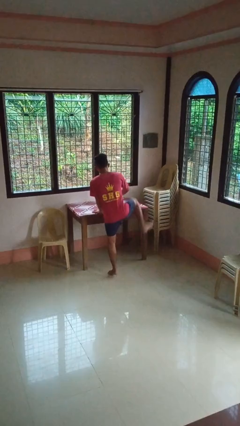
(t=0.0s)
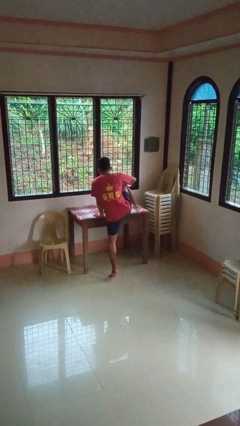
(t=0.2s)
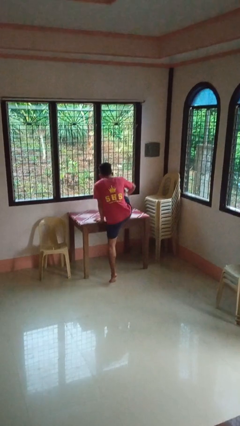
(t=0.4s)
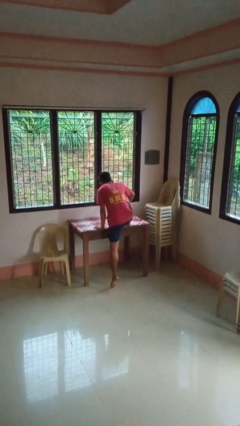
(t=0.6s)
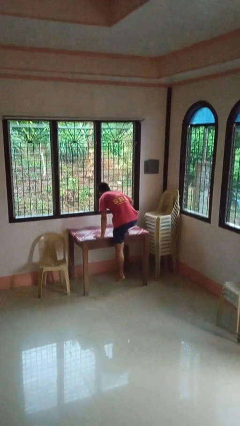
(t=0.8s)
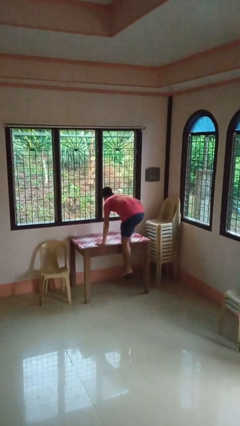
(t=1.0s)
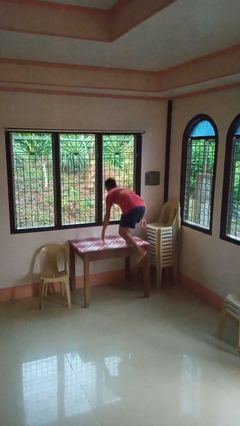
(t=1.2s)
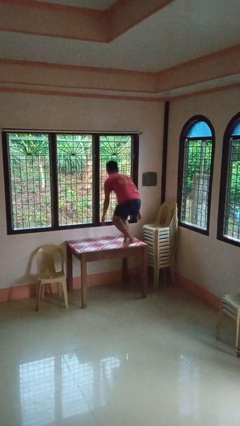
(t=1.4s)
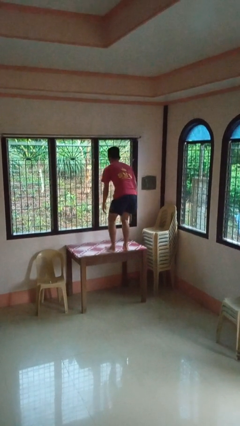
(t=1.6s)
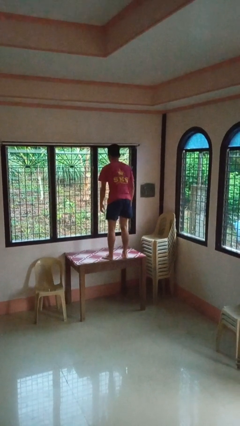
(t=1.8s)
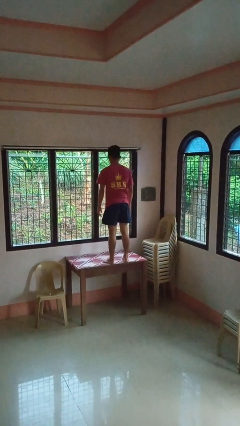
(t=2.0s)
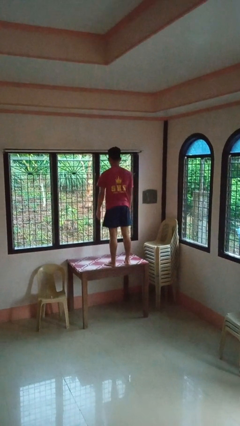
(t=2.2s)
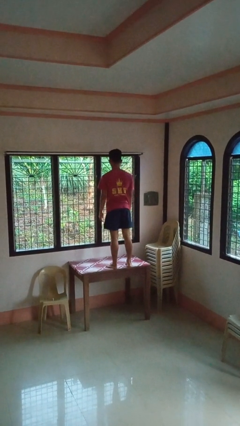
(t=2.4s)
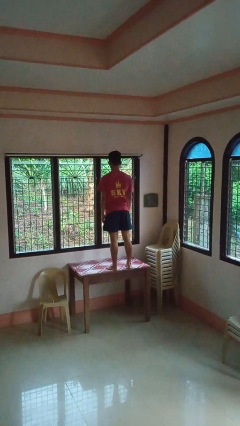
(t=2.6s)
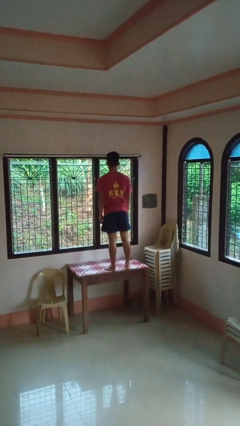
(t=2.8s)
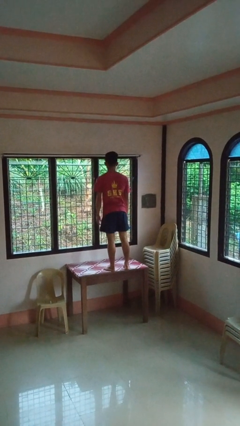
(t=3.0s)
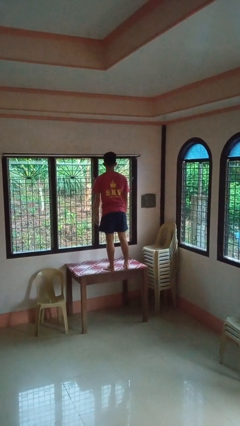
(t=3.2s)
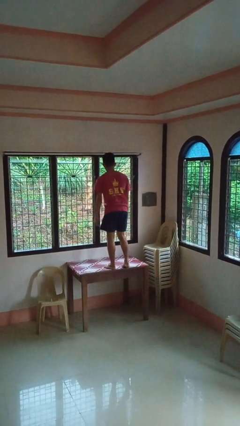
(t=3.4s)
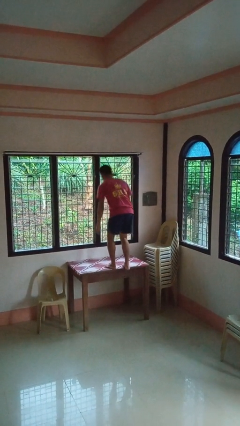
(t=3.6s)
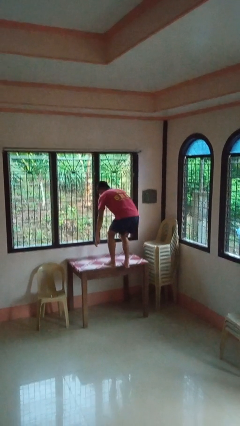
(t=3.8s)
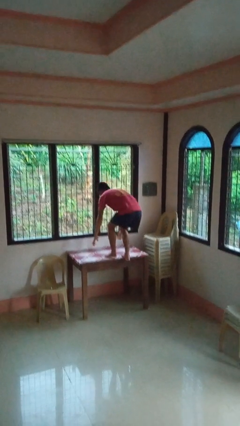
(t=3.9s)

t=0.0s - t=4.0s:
person climbs on table

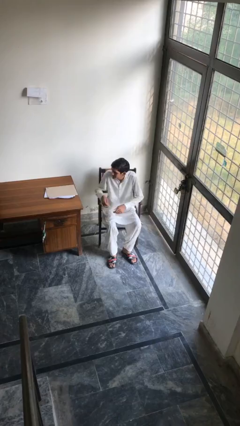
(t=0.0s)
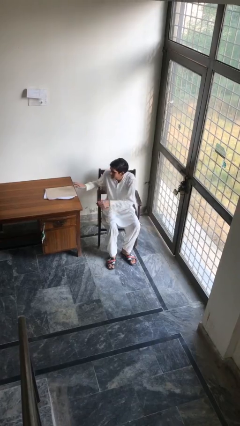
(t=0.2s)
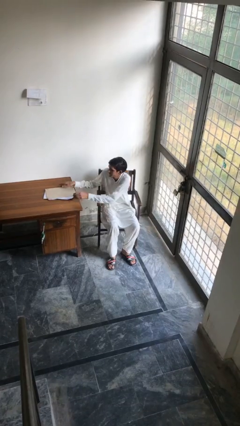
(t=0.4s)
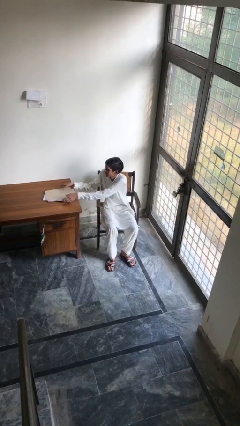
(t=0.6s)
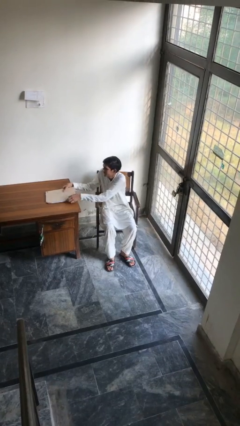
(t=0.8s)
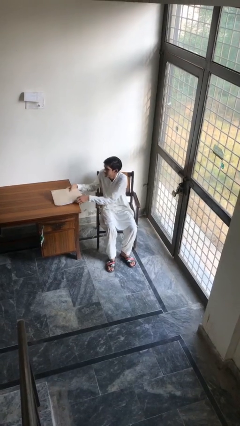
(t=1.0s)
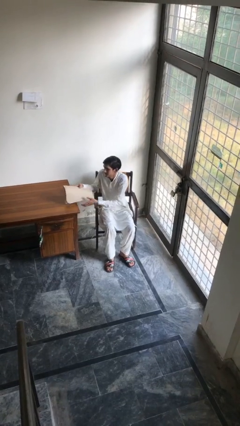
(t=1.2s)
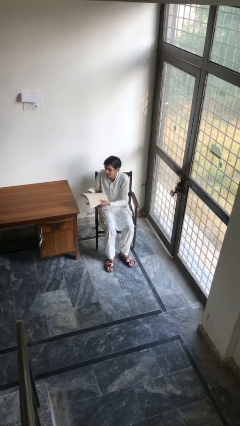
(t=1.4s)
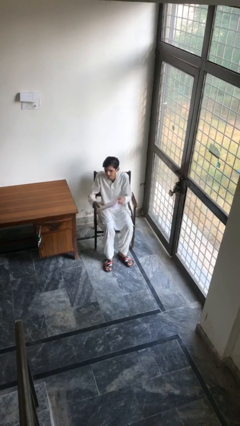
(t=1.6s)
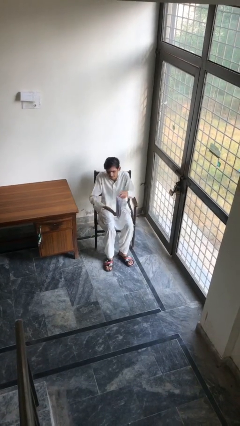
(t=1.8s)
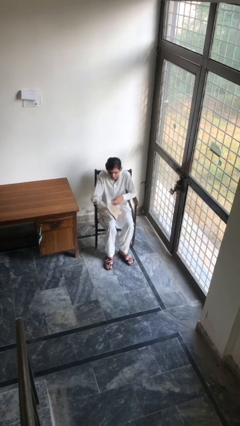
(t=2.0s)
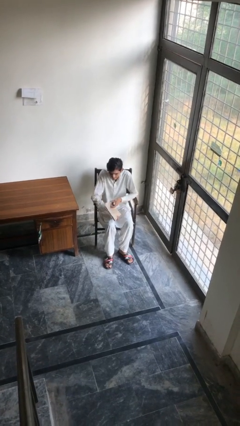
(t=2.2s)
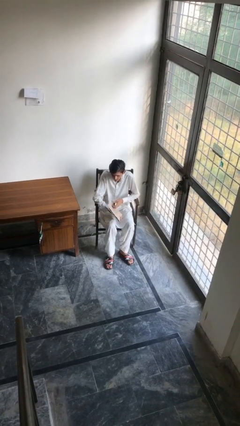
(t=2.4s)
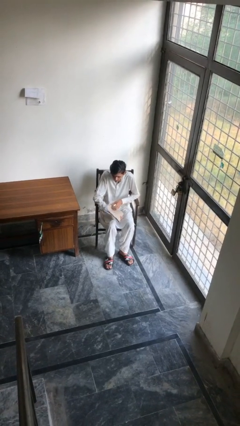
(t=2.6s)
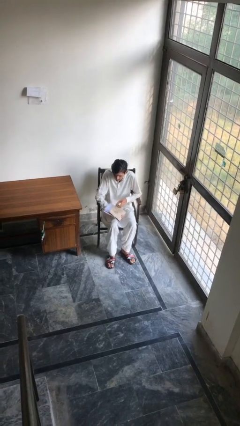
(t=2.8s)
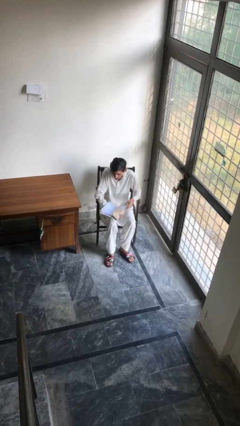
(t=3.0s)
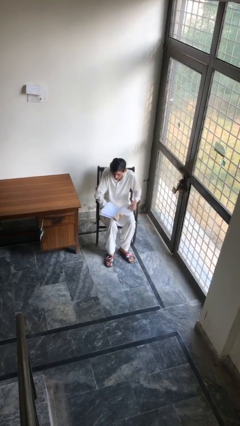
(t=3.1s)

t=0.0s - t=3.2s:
person picks up object from table

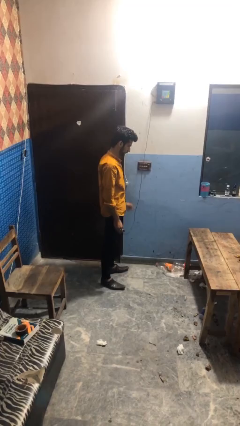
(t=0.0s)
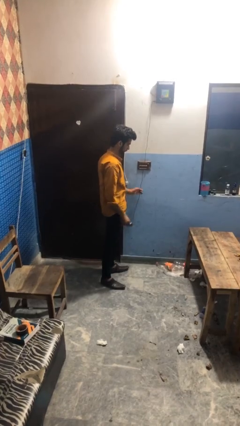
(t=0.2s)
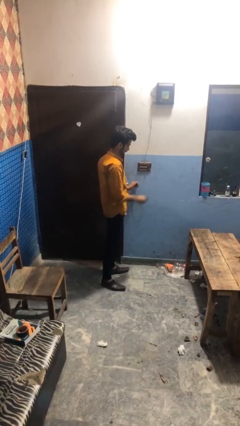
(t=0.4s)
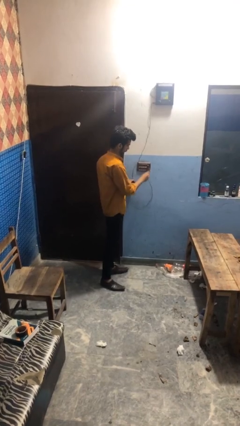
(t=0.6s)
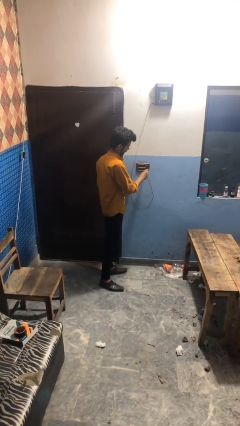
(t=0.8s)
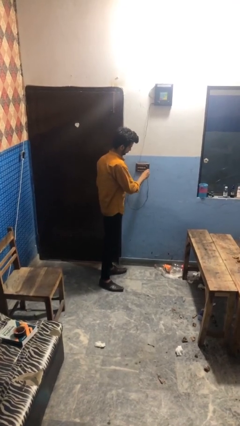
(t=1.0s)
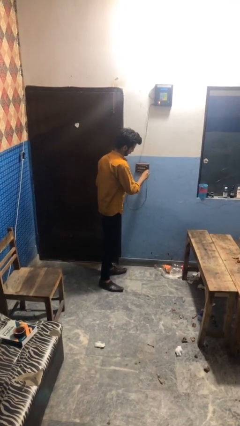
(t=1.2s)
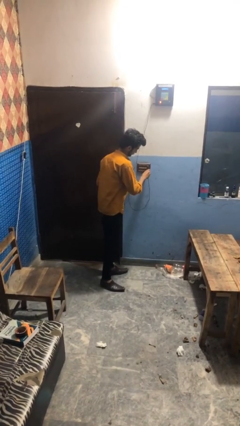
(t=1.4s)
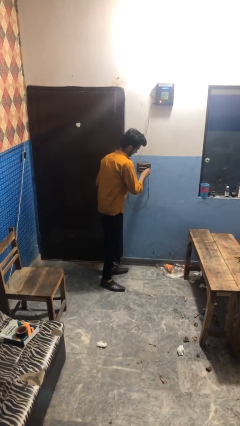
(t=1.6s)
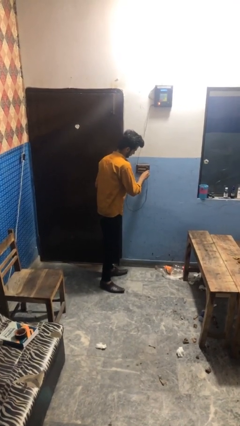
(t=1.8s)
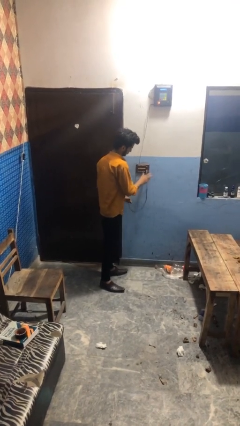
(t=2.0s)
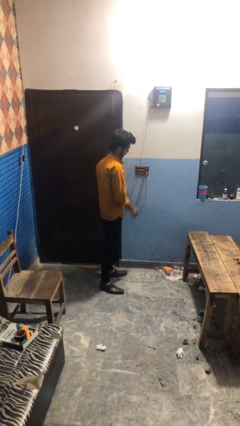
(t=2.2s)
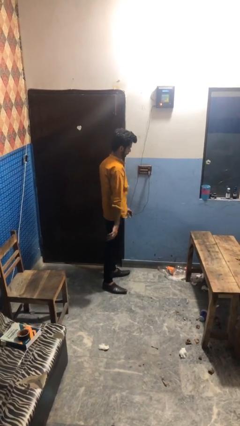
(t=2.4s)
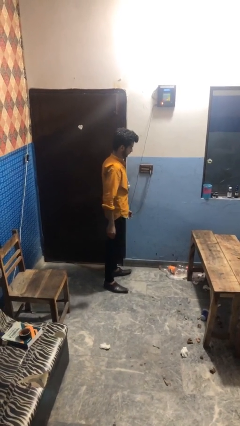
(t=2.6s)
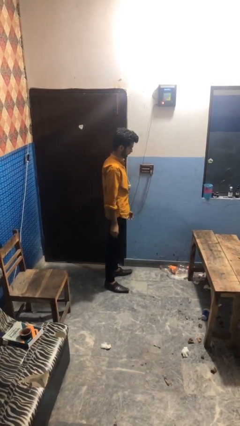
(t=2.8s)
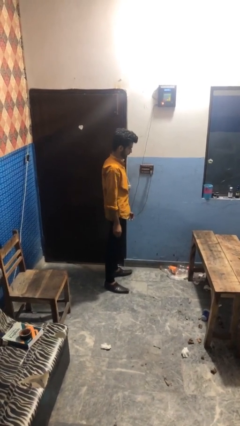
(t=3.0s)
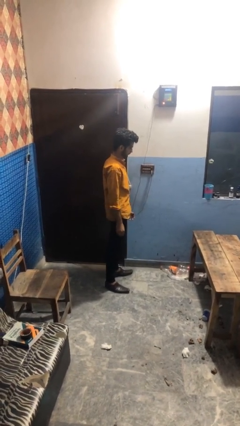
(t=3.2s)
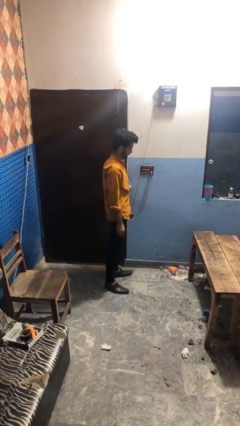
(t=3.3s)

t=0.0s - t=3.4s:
person plugs into electrical socket

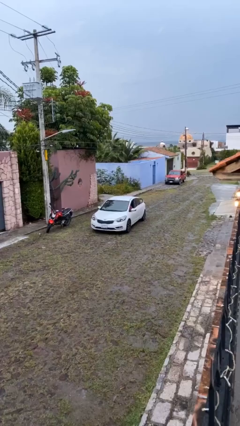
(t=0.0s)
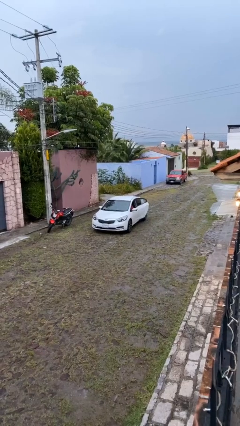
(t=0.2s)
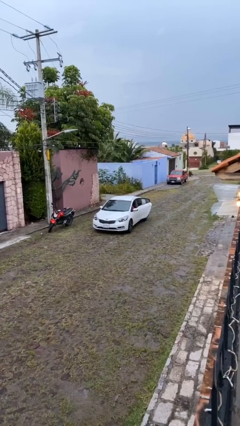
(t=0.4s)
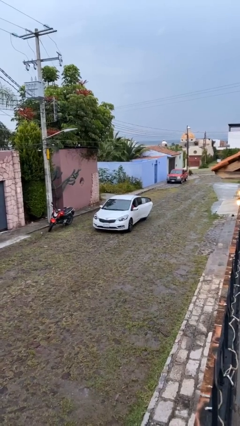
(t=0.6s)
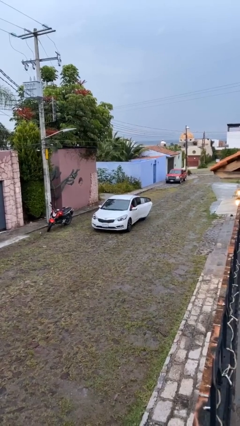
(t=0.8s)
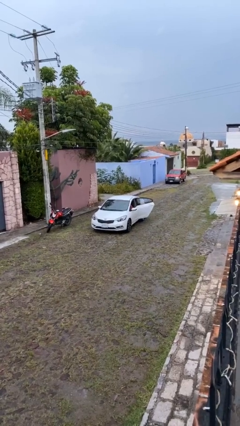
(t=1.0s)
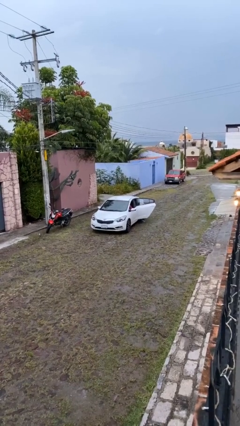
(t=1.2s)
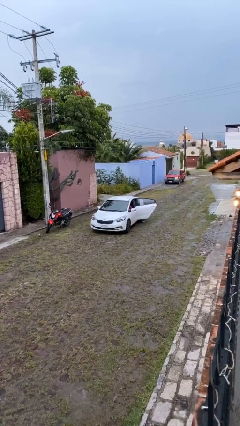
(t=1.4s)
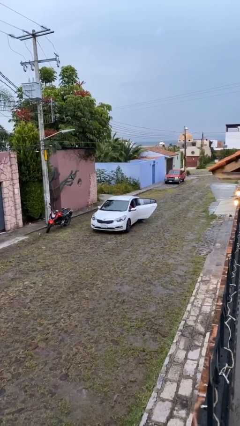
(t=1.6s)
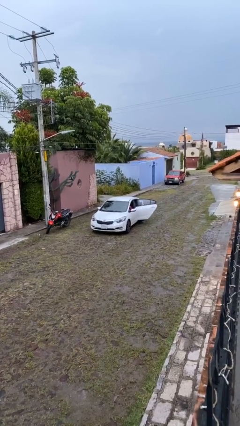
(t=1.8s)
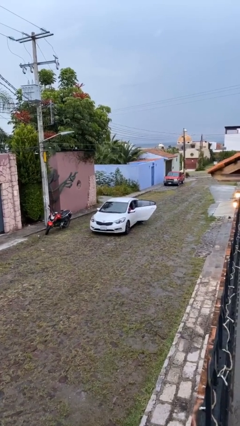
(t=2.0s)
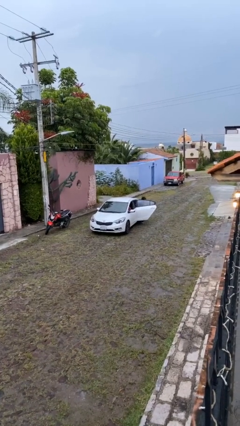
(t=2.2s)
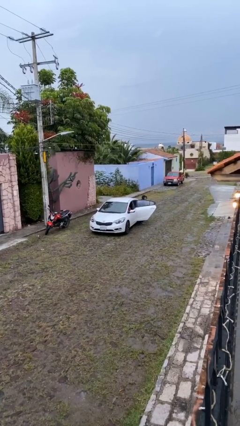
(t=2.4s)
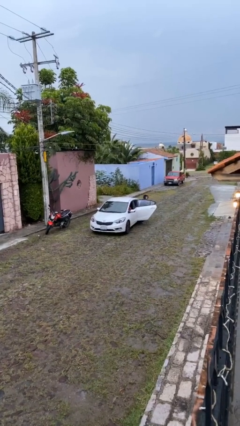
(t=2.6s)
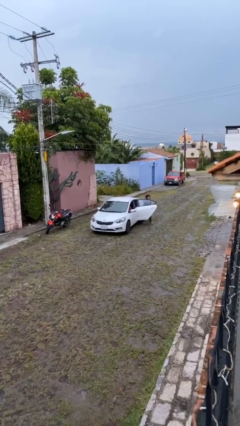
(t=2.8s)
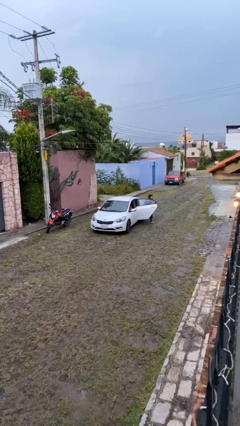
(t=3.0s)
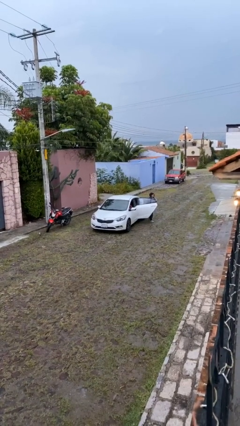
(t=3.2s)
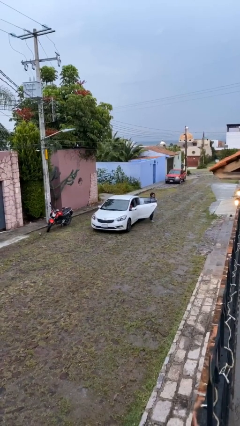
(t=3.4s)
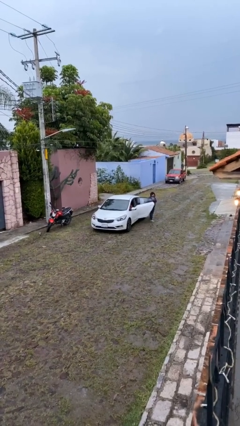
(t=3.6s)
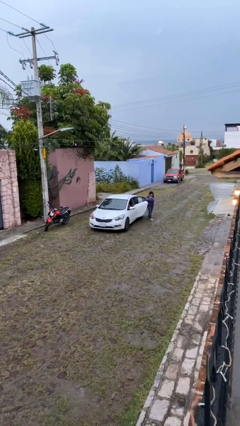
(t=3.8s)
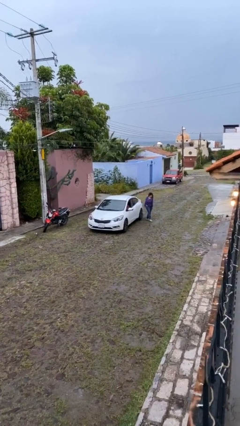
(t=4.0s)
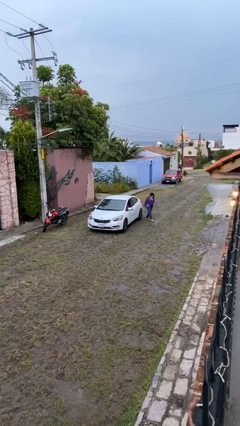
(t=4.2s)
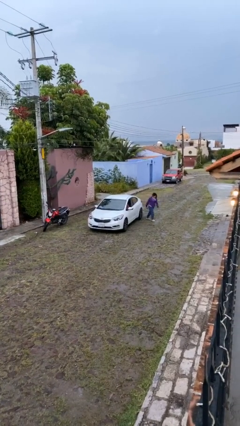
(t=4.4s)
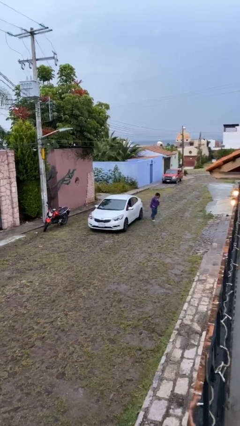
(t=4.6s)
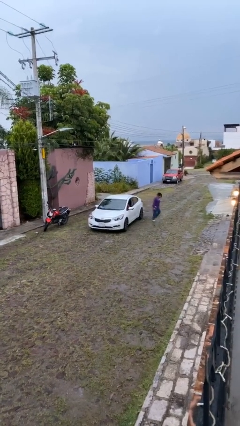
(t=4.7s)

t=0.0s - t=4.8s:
car drops off person

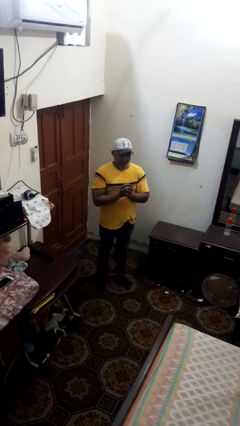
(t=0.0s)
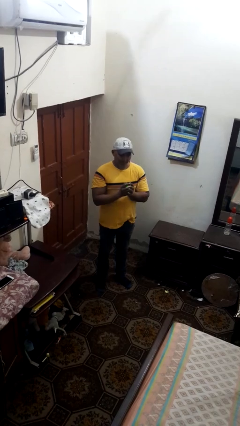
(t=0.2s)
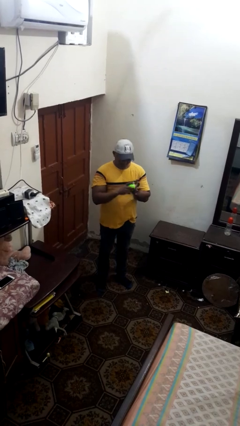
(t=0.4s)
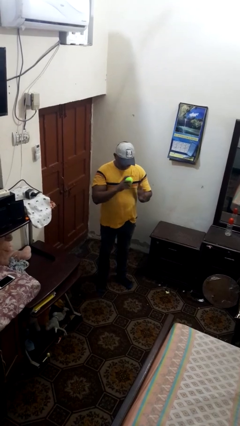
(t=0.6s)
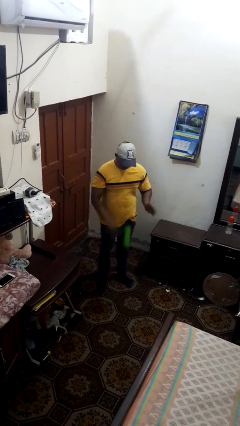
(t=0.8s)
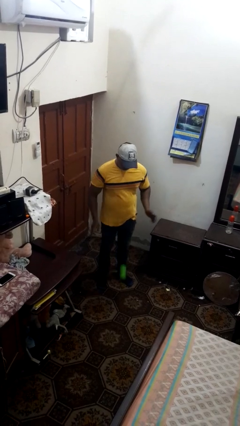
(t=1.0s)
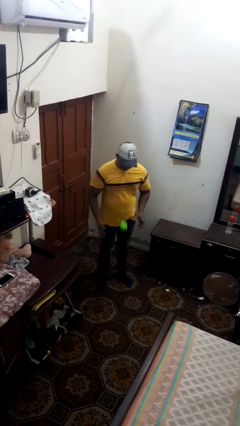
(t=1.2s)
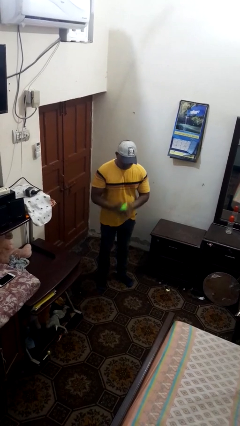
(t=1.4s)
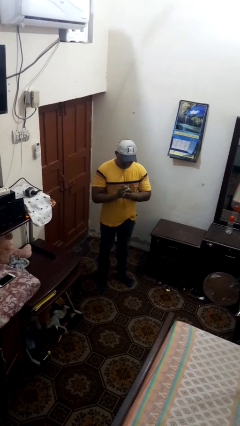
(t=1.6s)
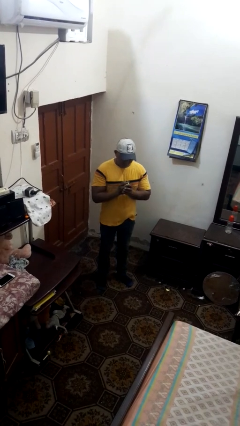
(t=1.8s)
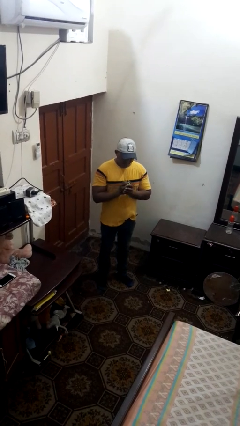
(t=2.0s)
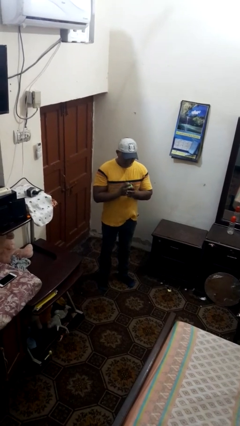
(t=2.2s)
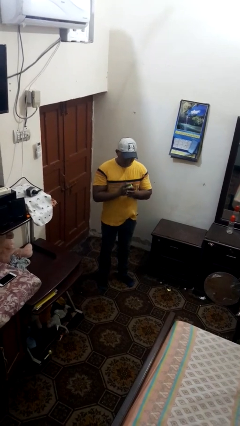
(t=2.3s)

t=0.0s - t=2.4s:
person bounces ball on floor
